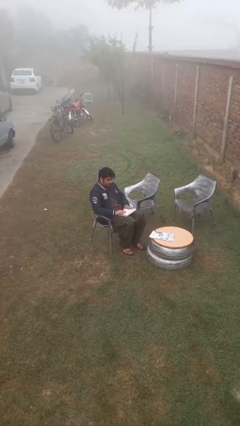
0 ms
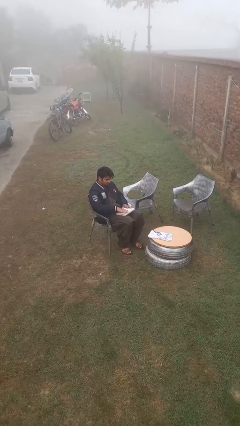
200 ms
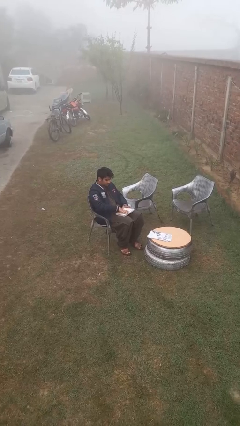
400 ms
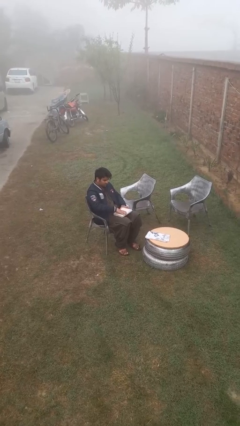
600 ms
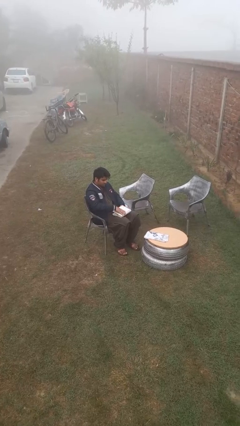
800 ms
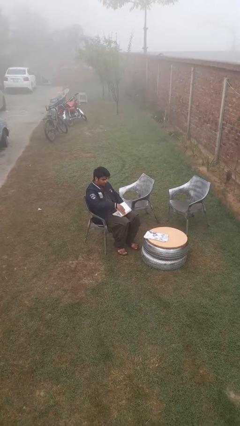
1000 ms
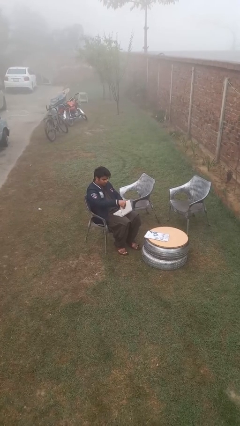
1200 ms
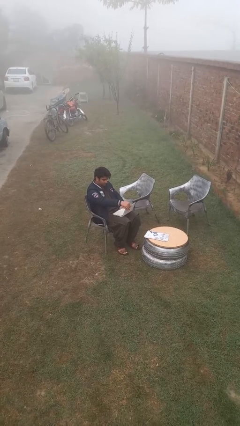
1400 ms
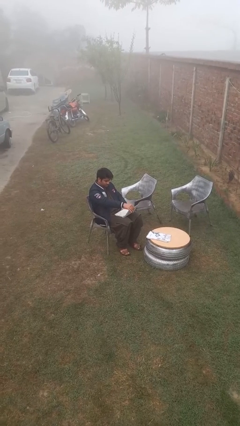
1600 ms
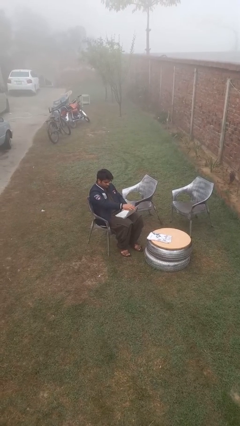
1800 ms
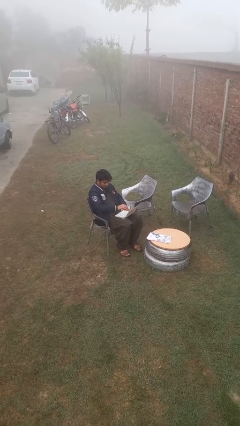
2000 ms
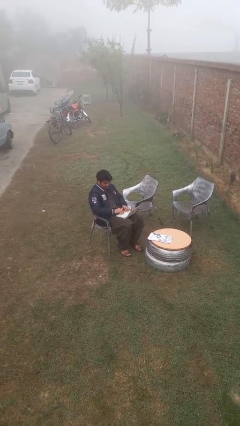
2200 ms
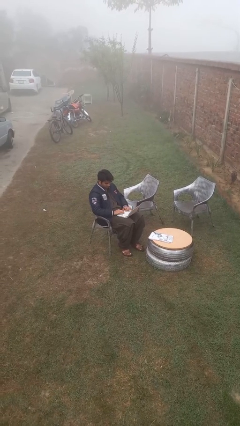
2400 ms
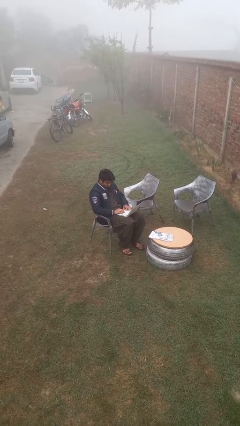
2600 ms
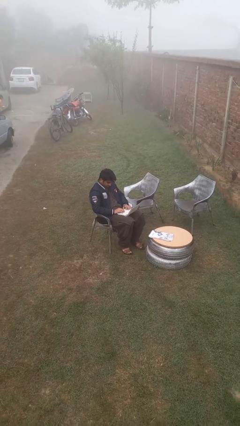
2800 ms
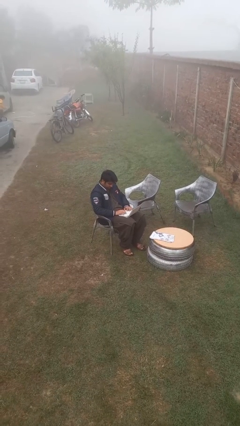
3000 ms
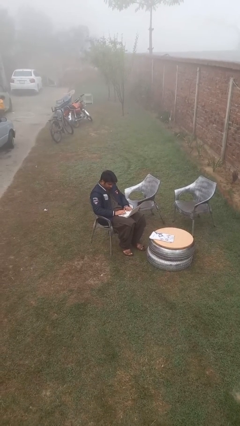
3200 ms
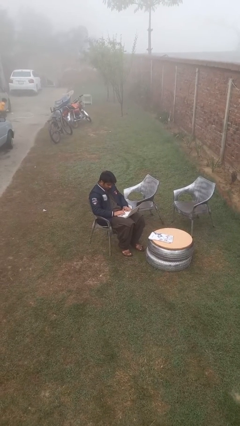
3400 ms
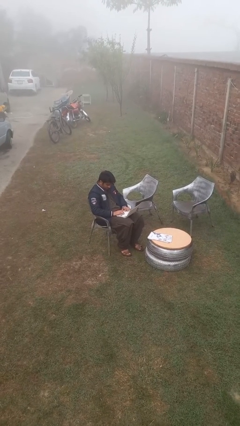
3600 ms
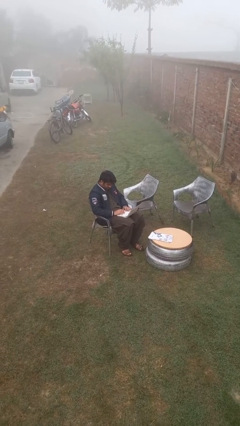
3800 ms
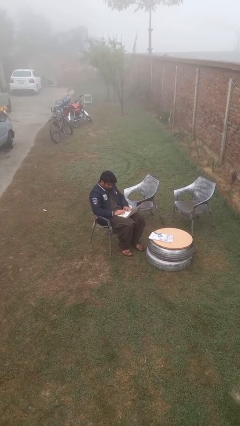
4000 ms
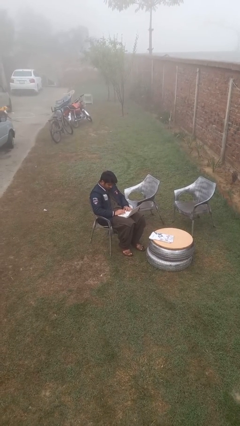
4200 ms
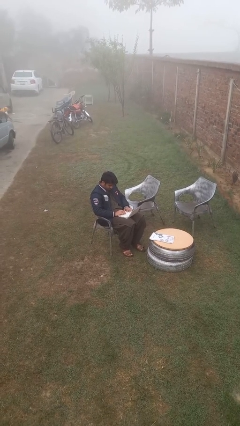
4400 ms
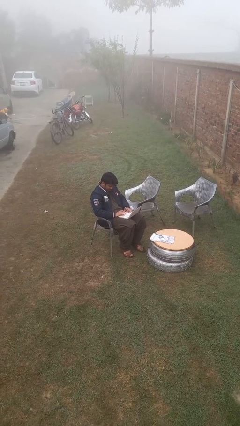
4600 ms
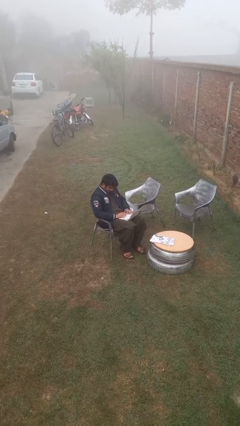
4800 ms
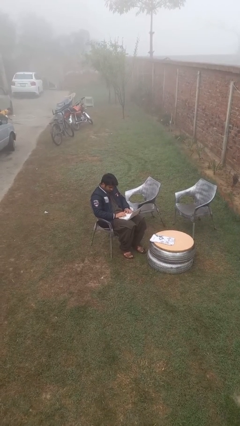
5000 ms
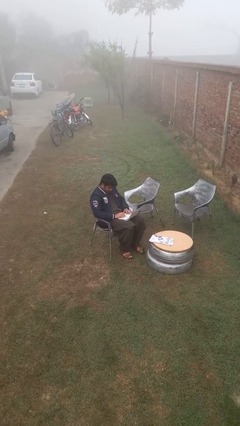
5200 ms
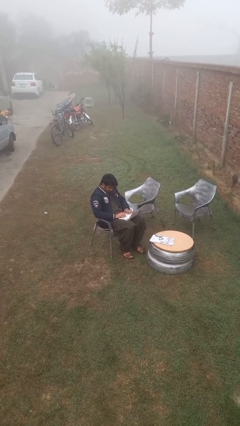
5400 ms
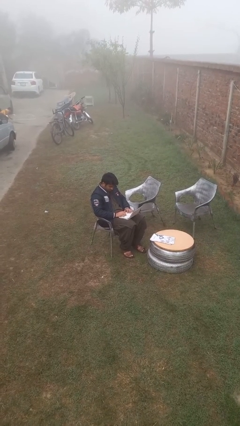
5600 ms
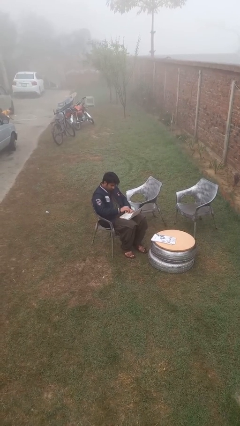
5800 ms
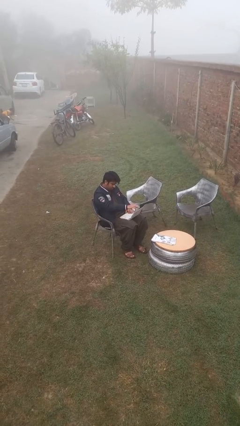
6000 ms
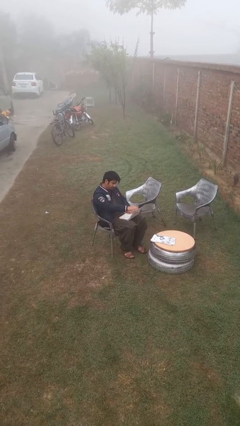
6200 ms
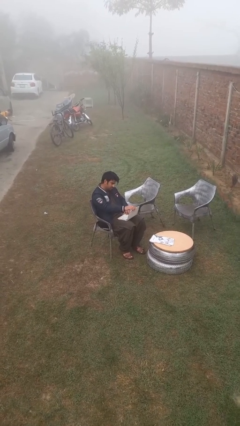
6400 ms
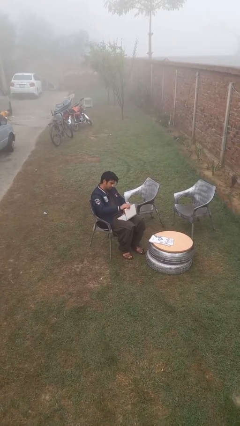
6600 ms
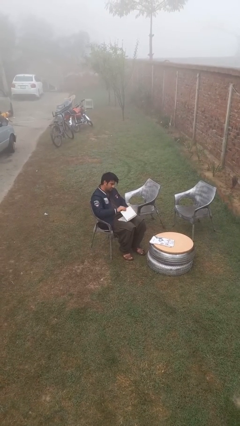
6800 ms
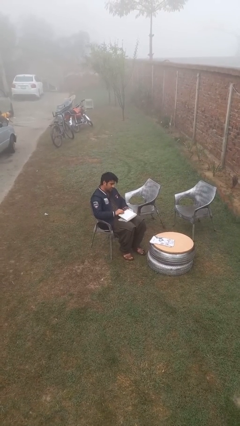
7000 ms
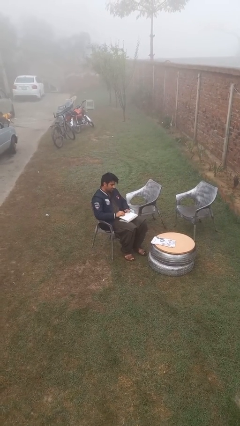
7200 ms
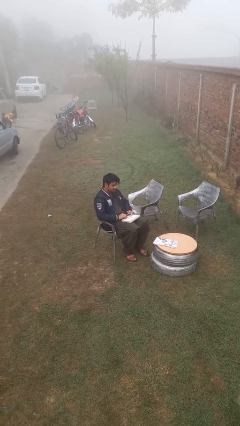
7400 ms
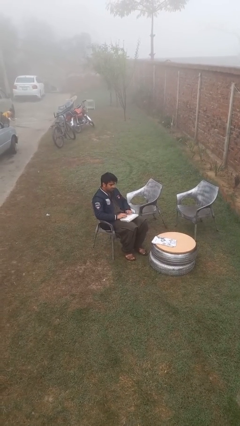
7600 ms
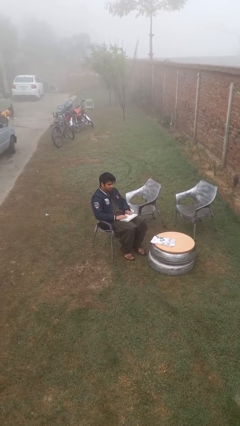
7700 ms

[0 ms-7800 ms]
person interacts with laptop

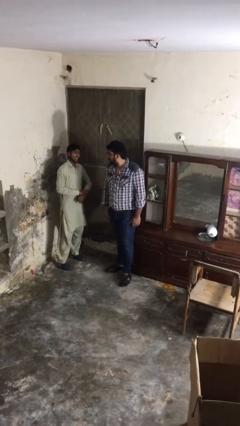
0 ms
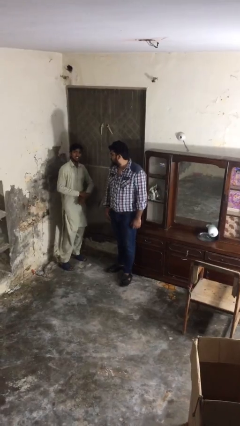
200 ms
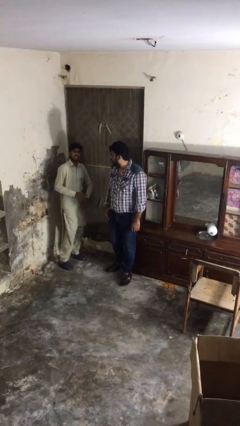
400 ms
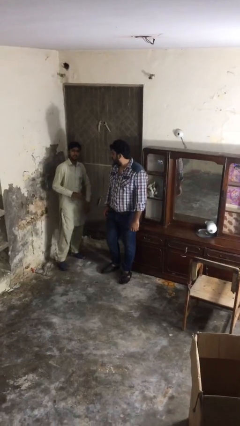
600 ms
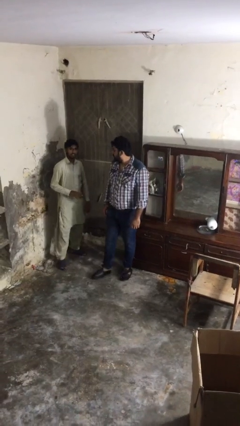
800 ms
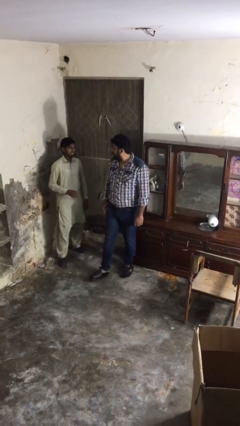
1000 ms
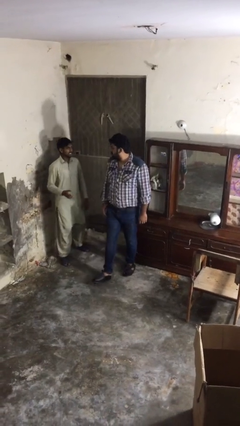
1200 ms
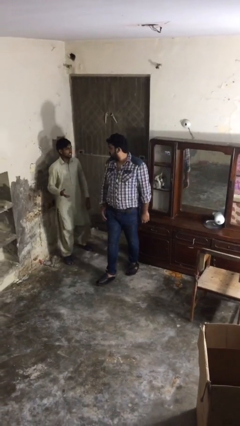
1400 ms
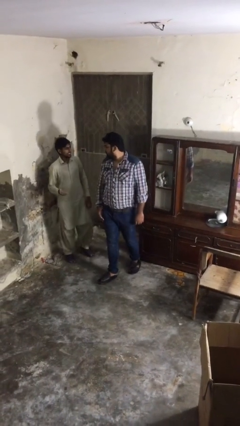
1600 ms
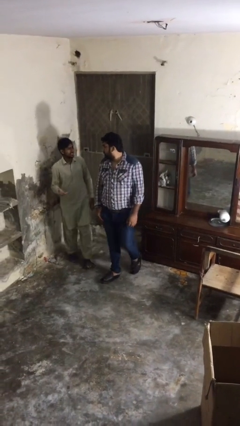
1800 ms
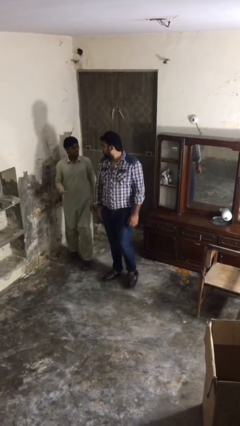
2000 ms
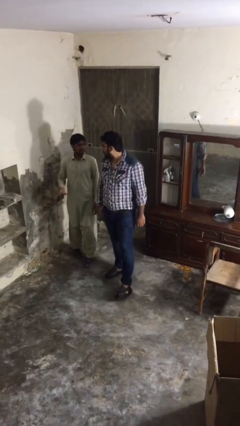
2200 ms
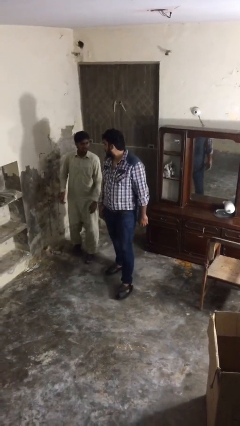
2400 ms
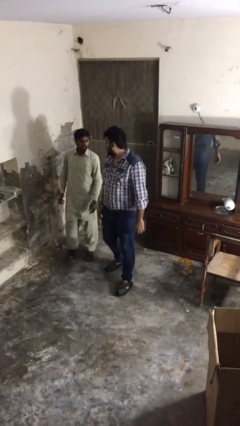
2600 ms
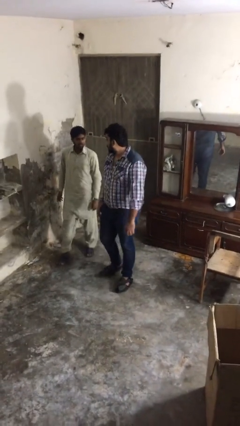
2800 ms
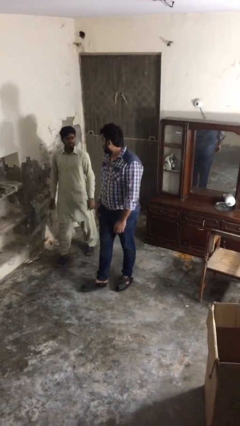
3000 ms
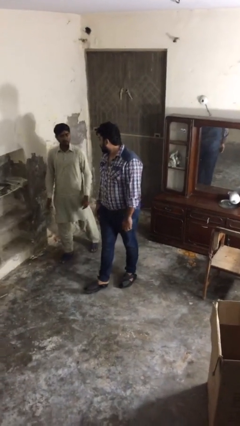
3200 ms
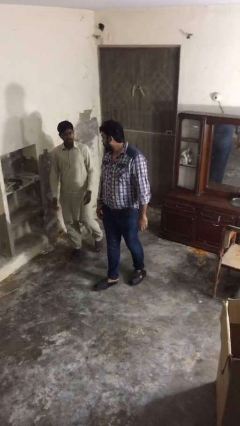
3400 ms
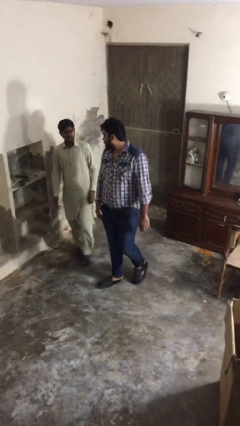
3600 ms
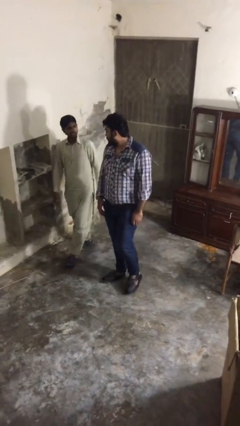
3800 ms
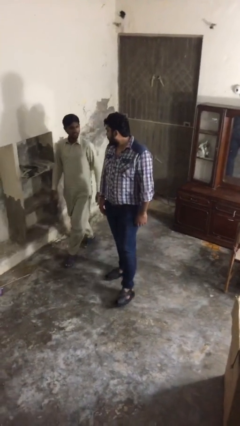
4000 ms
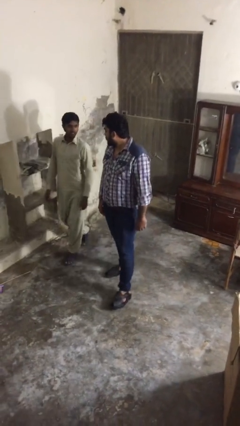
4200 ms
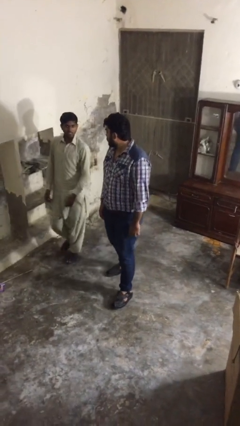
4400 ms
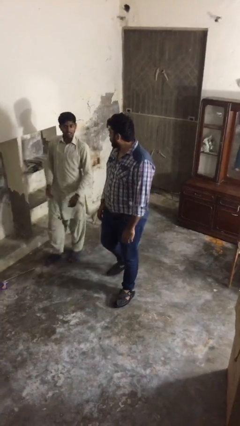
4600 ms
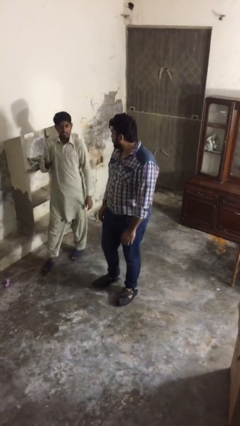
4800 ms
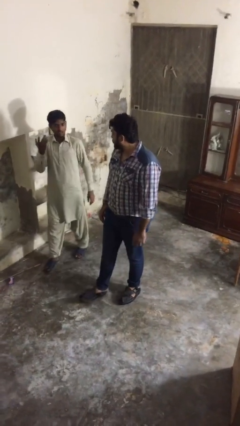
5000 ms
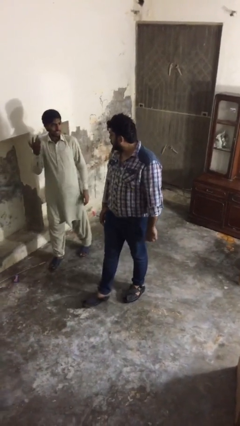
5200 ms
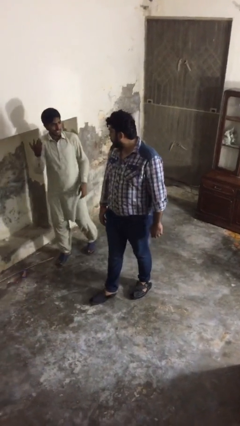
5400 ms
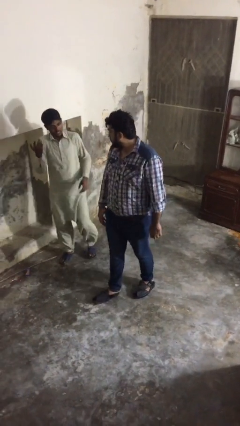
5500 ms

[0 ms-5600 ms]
person talks to person

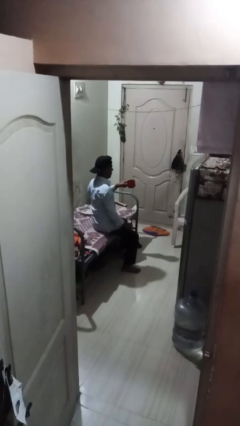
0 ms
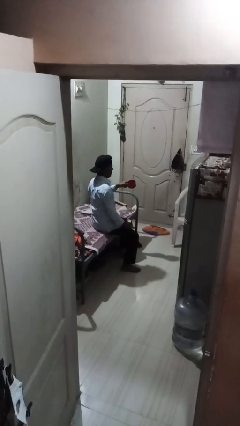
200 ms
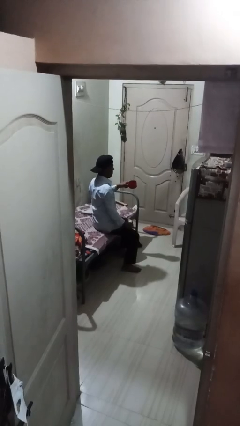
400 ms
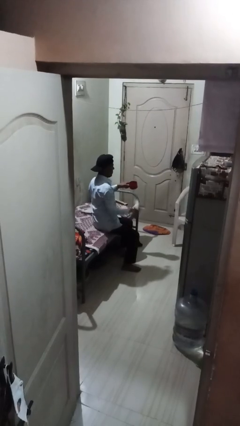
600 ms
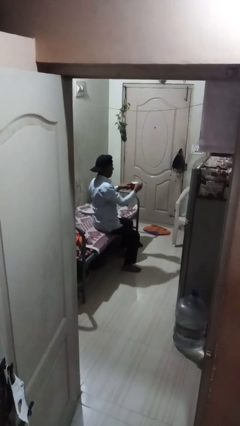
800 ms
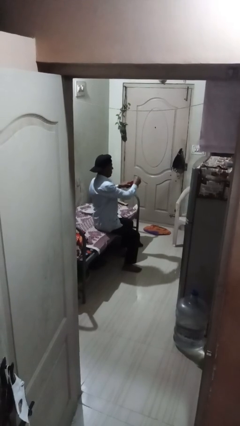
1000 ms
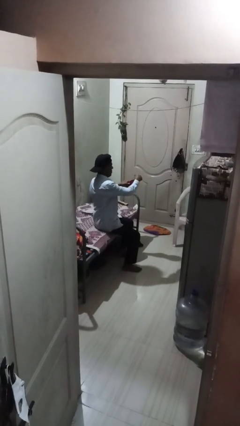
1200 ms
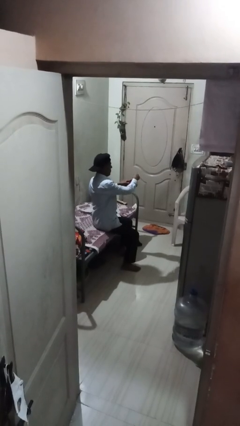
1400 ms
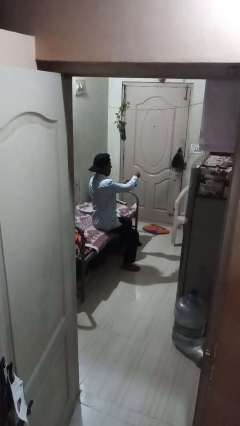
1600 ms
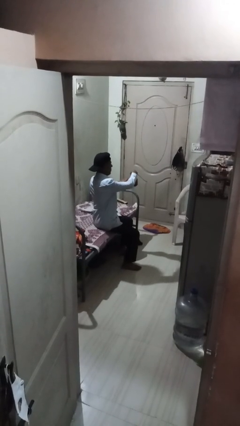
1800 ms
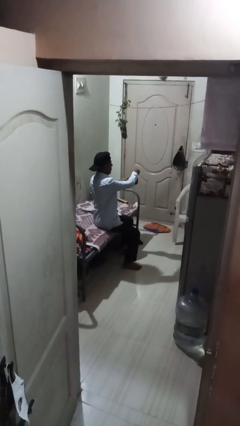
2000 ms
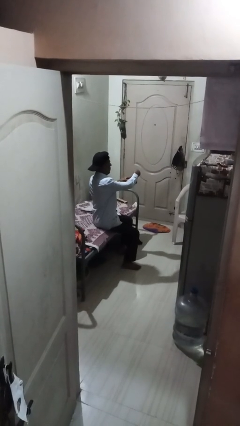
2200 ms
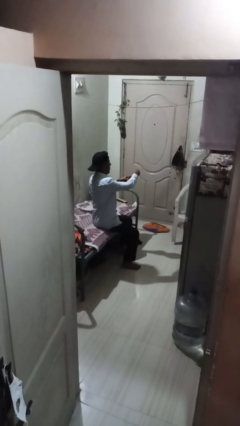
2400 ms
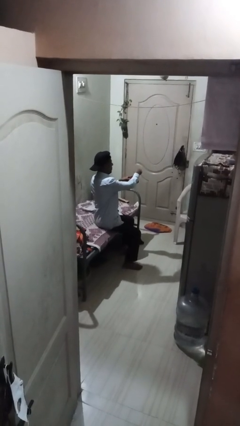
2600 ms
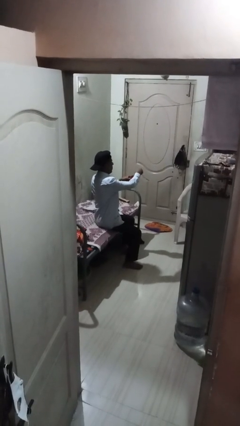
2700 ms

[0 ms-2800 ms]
person stirs mug

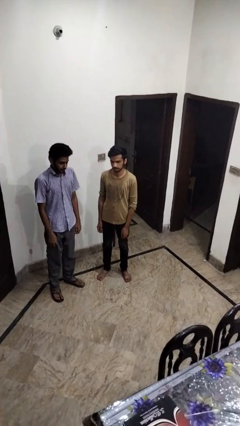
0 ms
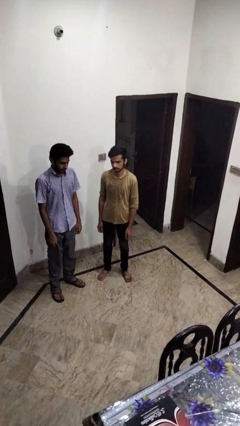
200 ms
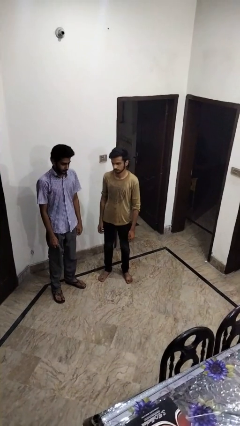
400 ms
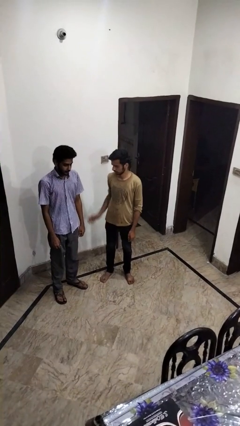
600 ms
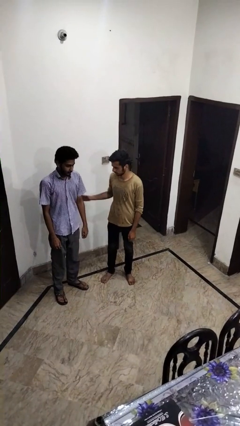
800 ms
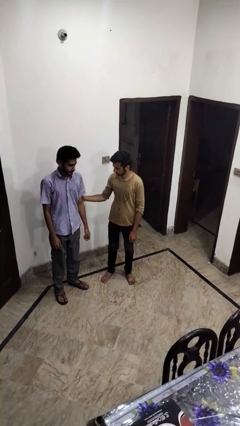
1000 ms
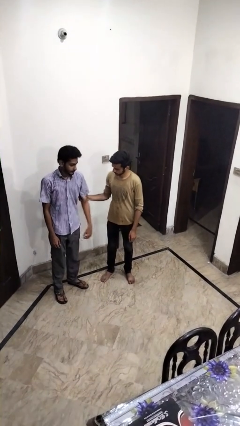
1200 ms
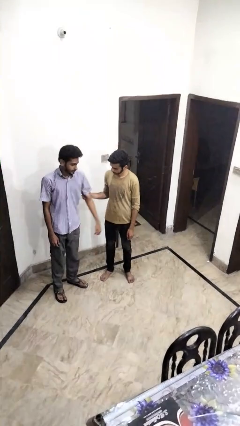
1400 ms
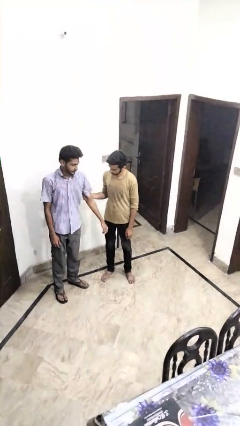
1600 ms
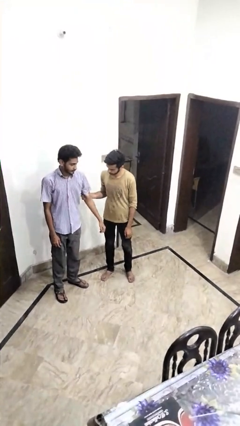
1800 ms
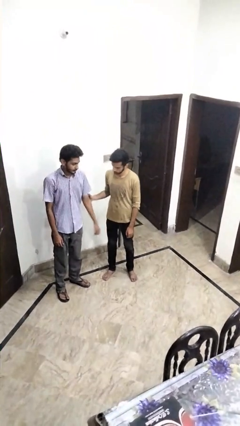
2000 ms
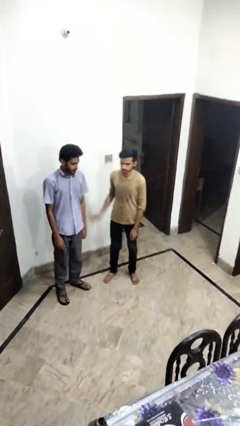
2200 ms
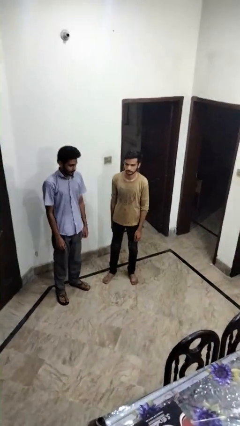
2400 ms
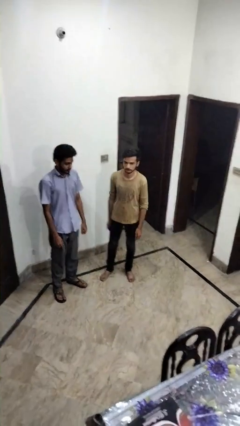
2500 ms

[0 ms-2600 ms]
person grabs person by bicep
